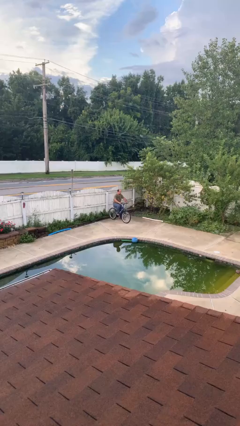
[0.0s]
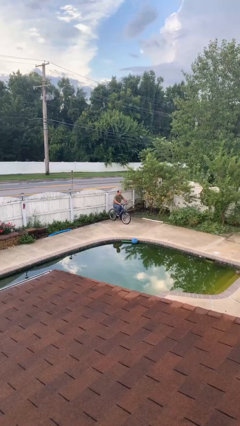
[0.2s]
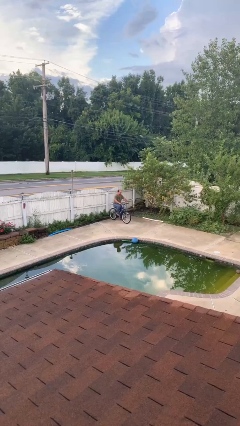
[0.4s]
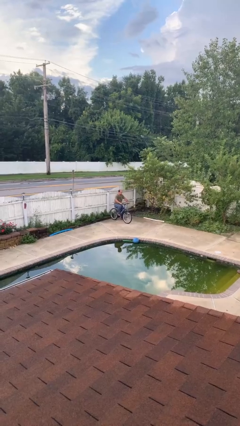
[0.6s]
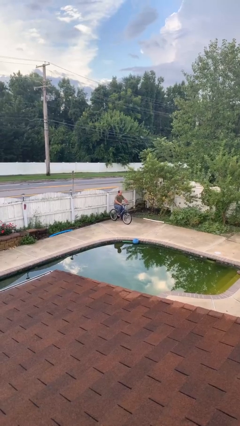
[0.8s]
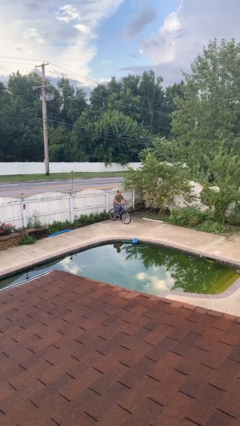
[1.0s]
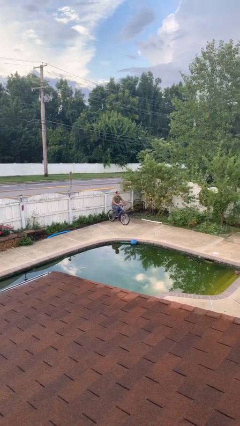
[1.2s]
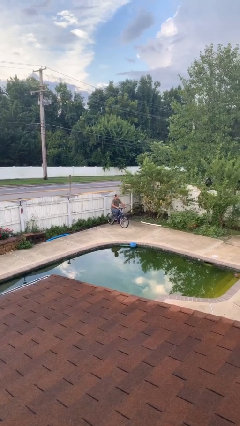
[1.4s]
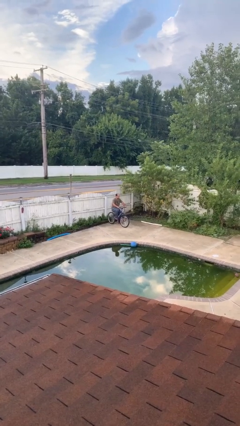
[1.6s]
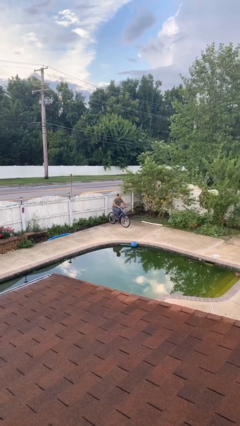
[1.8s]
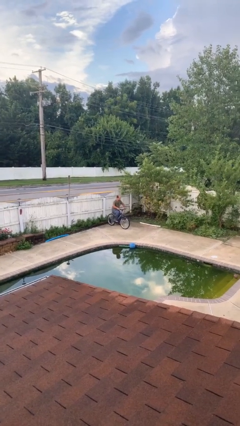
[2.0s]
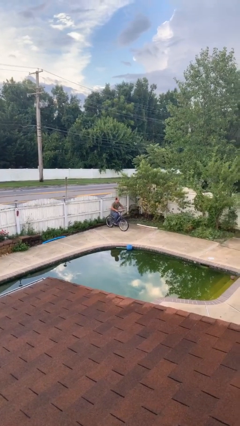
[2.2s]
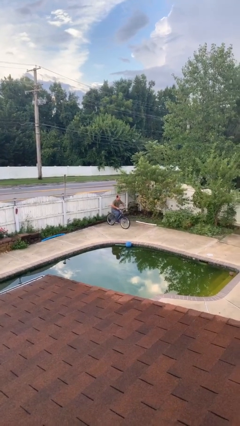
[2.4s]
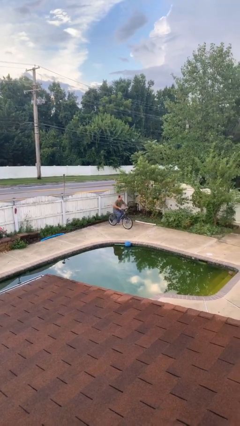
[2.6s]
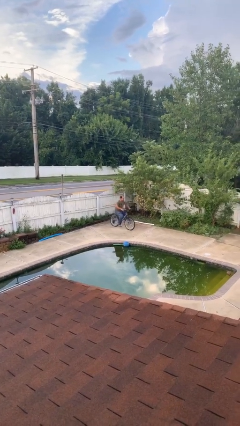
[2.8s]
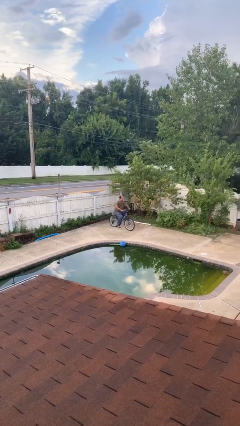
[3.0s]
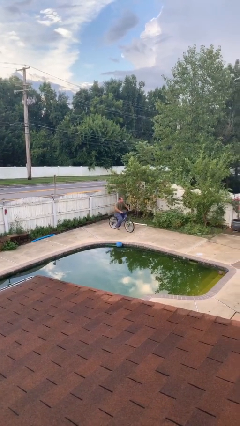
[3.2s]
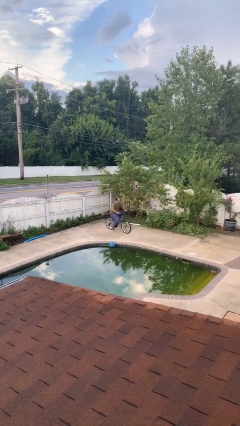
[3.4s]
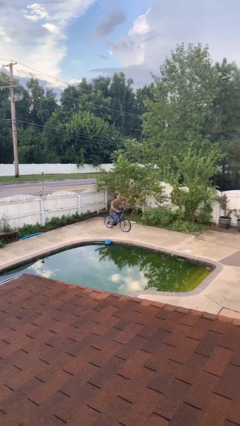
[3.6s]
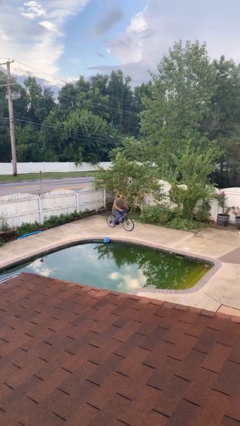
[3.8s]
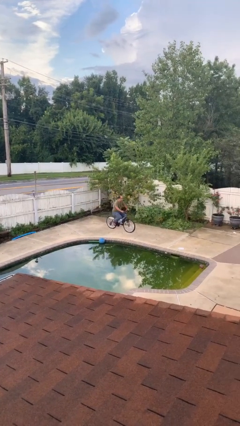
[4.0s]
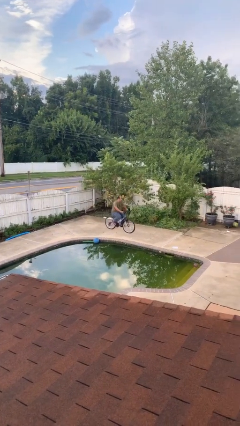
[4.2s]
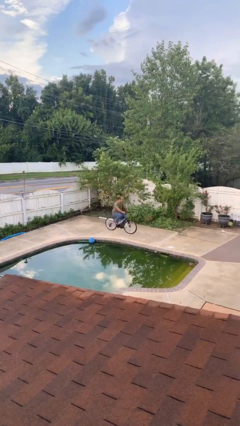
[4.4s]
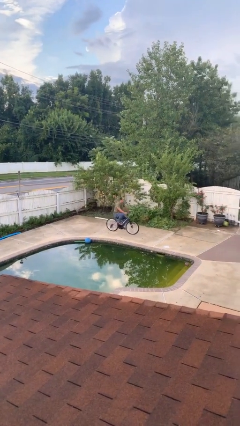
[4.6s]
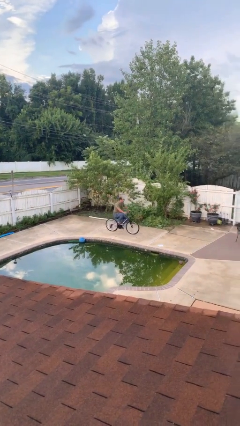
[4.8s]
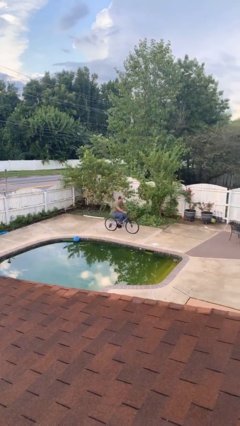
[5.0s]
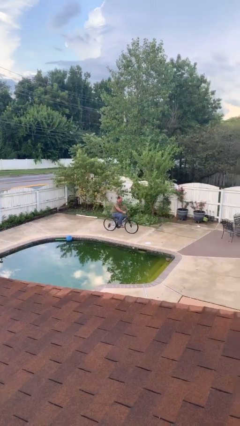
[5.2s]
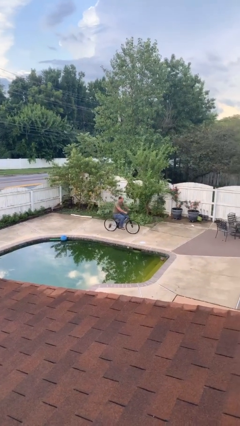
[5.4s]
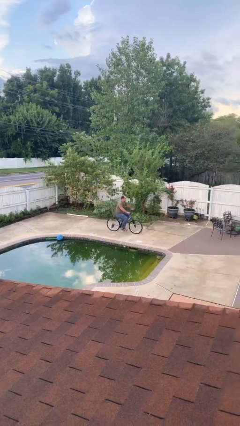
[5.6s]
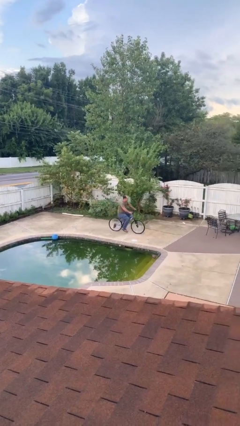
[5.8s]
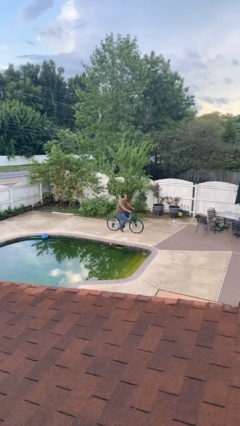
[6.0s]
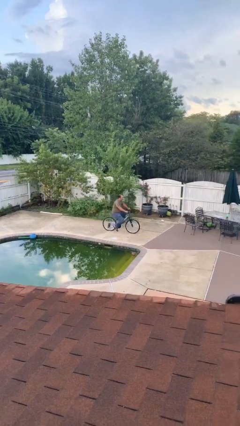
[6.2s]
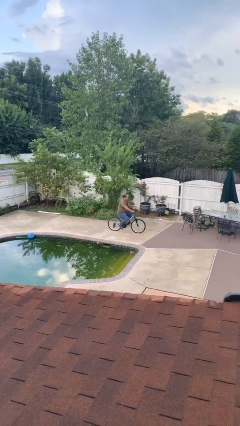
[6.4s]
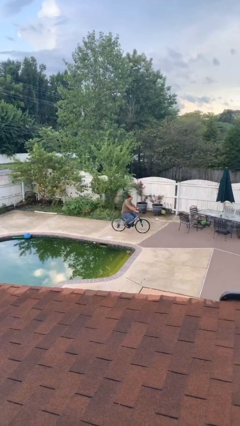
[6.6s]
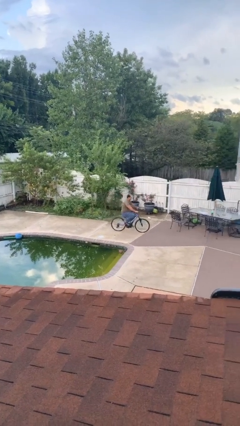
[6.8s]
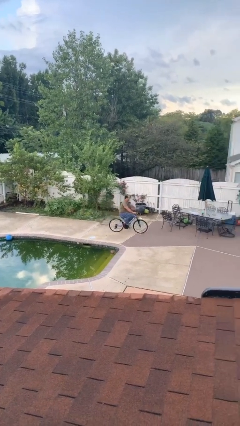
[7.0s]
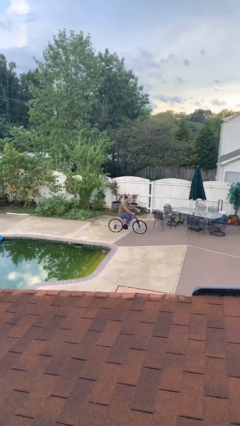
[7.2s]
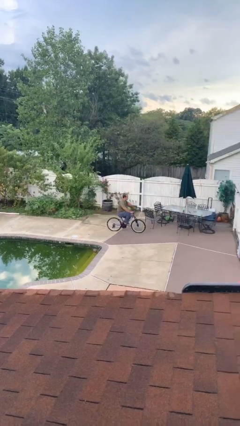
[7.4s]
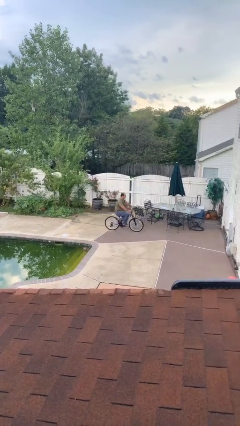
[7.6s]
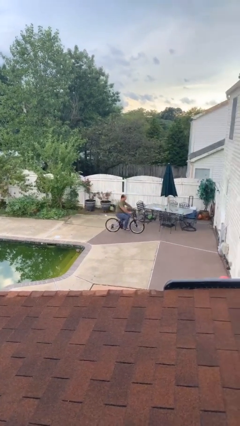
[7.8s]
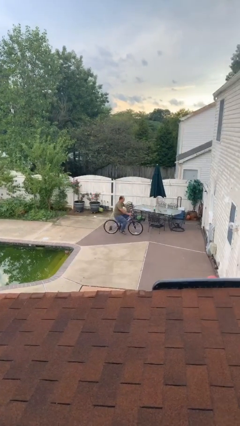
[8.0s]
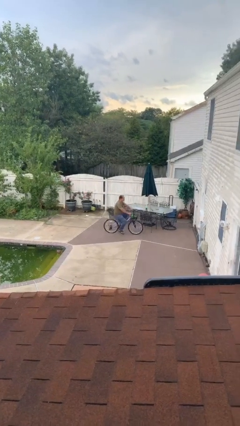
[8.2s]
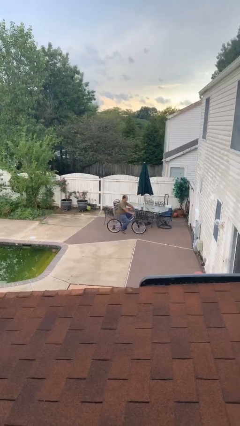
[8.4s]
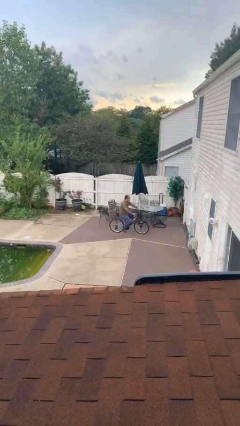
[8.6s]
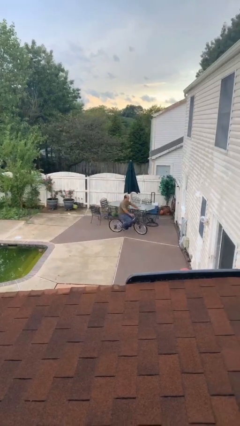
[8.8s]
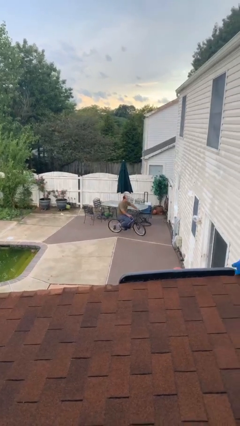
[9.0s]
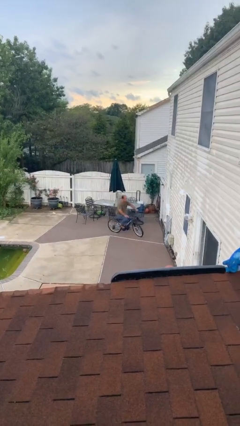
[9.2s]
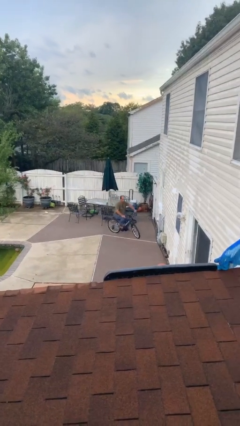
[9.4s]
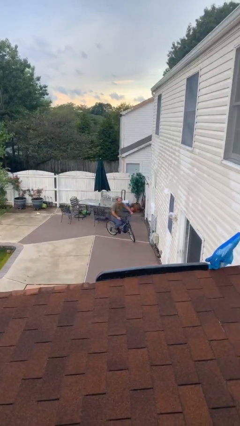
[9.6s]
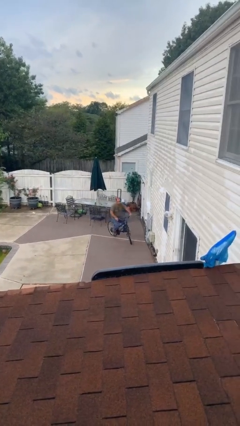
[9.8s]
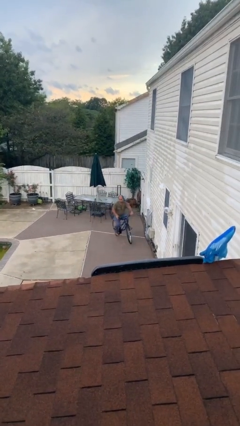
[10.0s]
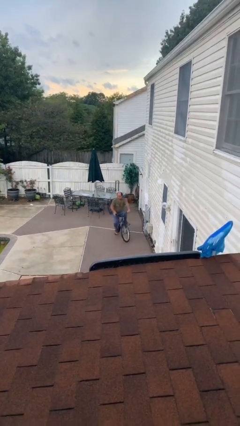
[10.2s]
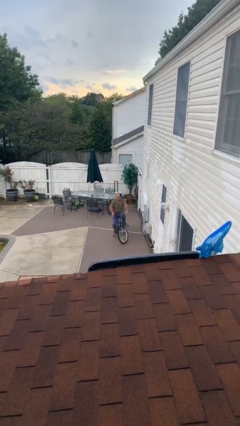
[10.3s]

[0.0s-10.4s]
person rides bicycle

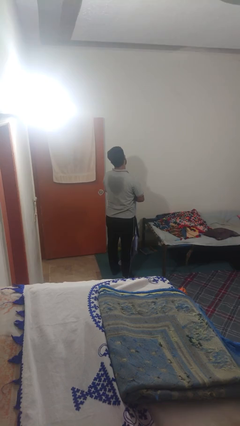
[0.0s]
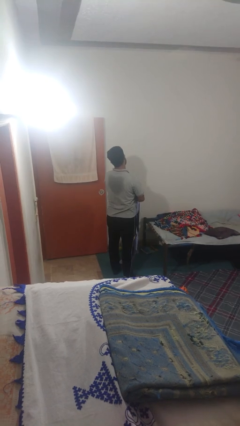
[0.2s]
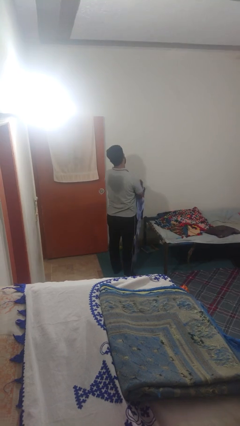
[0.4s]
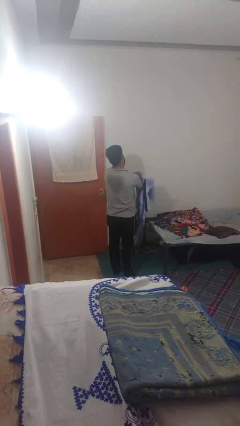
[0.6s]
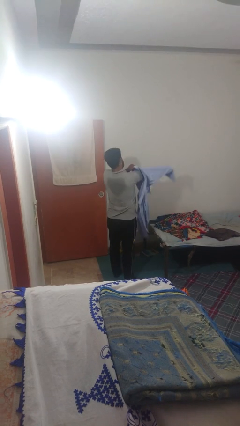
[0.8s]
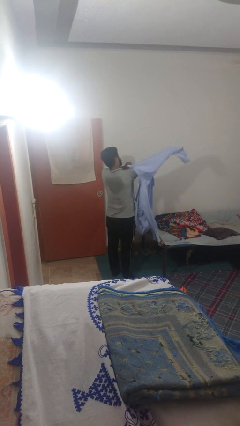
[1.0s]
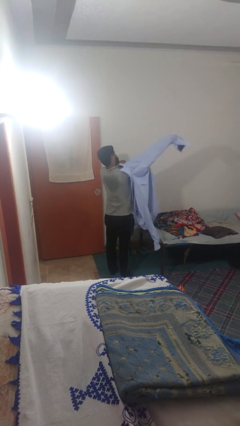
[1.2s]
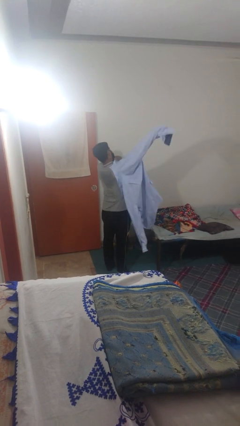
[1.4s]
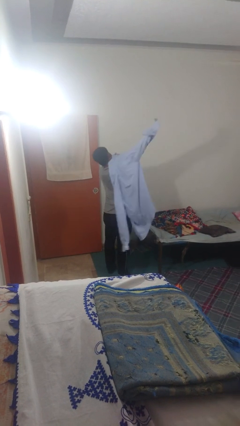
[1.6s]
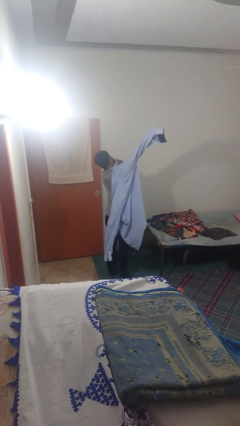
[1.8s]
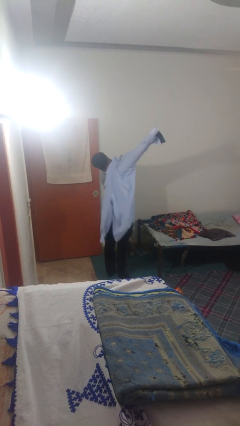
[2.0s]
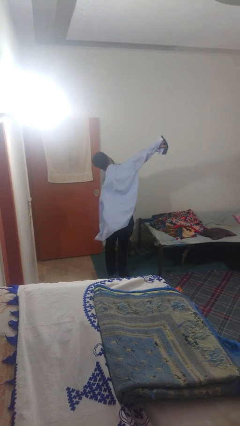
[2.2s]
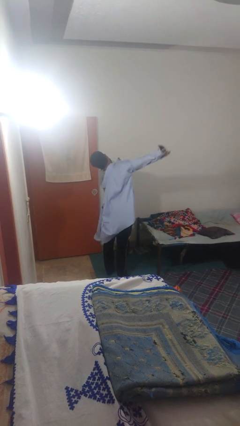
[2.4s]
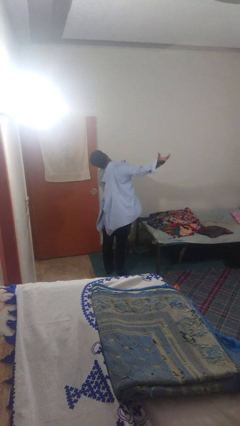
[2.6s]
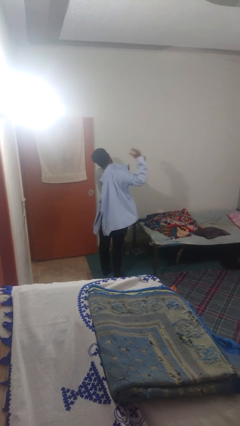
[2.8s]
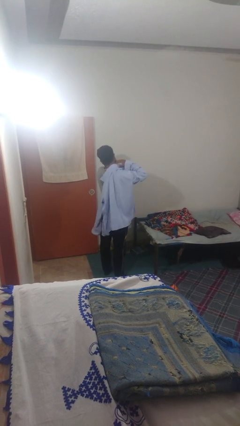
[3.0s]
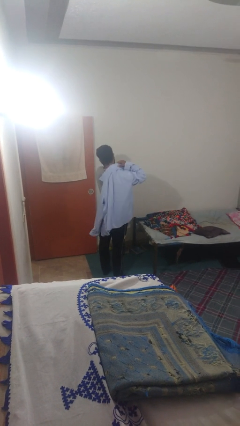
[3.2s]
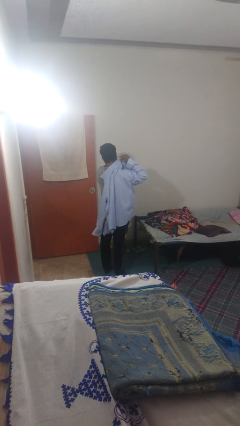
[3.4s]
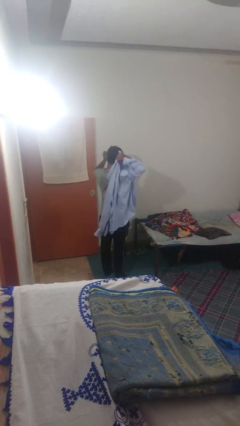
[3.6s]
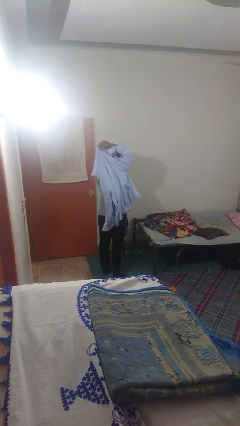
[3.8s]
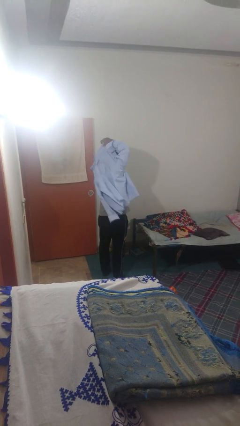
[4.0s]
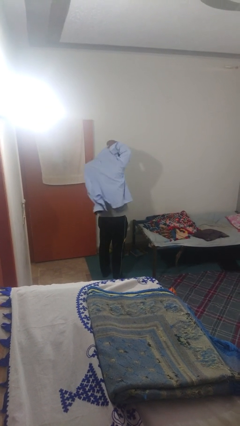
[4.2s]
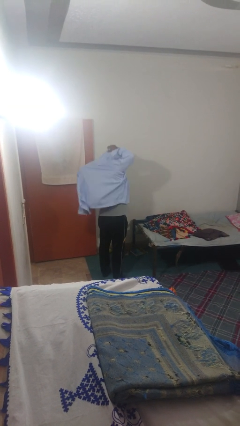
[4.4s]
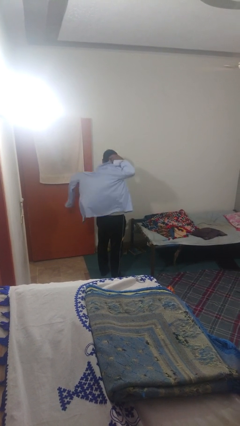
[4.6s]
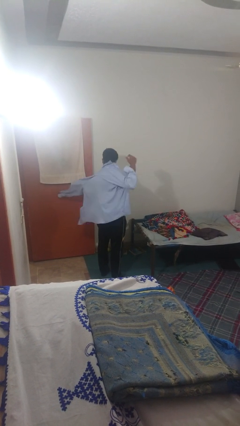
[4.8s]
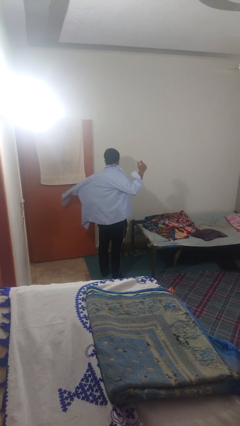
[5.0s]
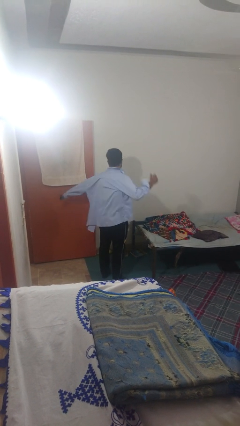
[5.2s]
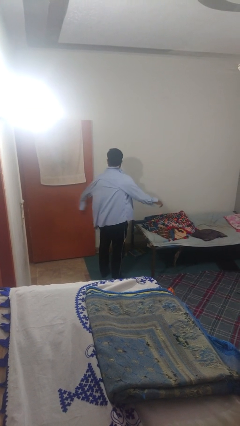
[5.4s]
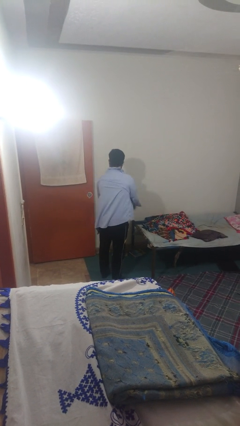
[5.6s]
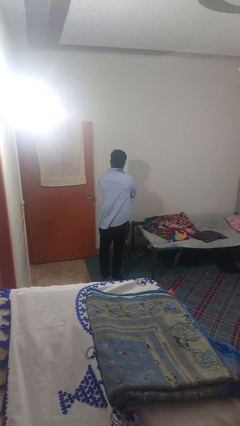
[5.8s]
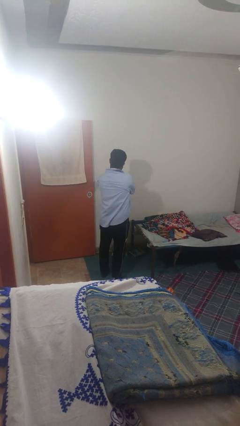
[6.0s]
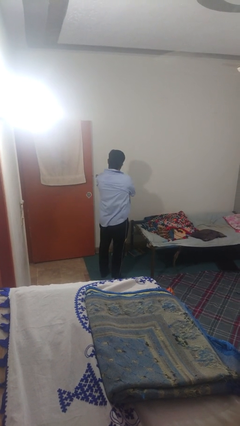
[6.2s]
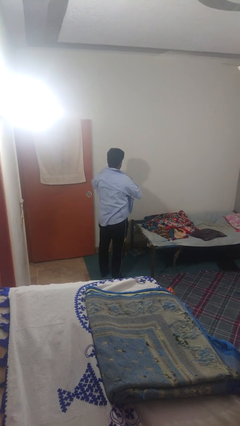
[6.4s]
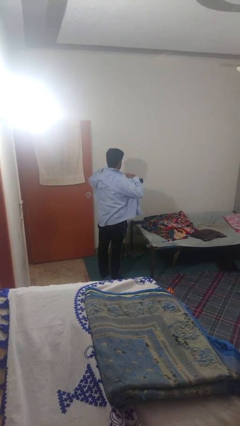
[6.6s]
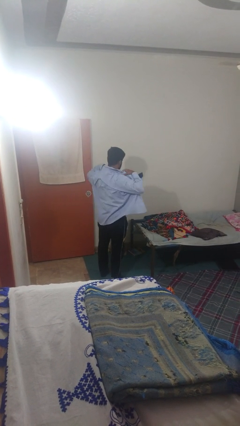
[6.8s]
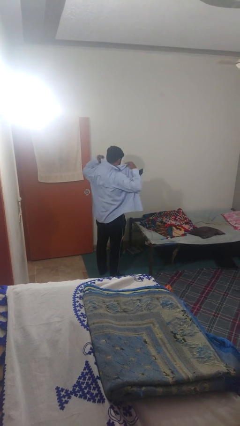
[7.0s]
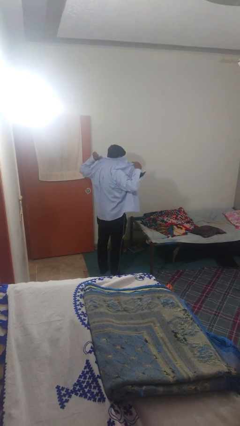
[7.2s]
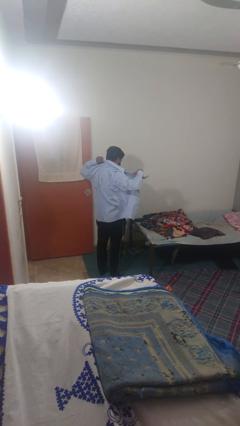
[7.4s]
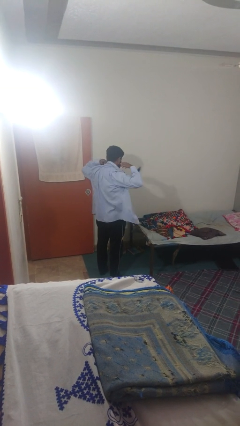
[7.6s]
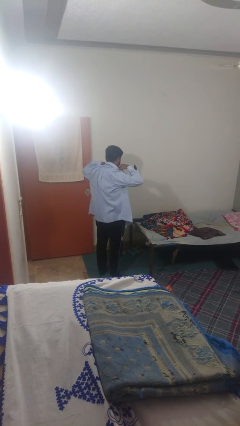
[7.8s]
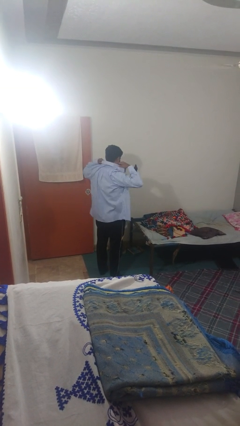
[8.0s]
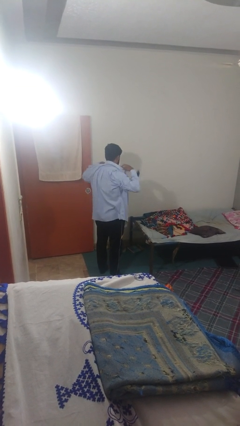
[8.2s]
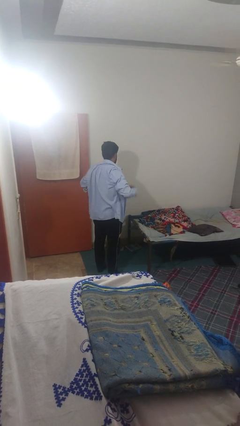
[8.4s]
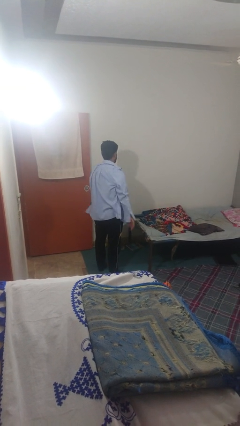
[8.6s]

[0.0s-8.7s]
person puts on shirt
